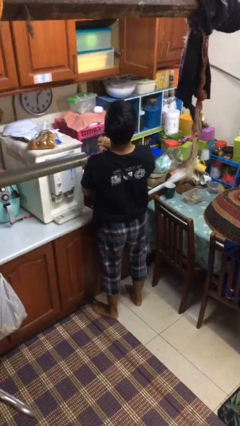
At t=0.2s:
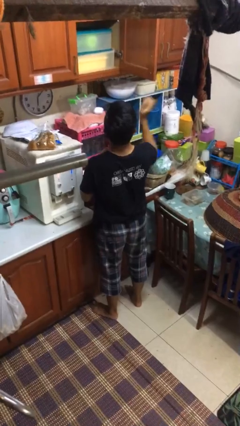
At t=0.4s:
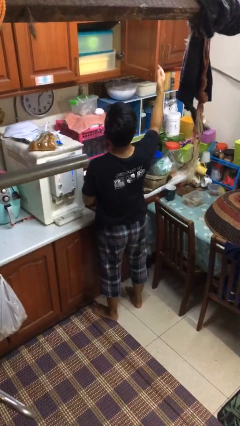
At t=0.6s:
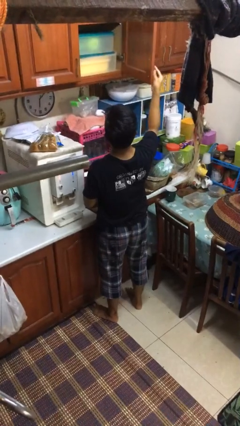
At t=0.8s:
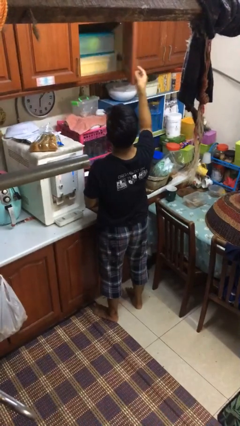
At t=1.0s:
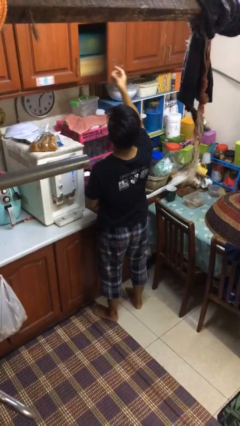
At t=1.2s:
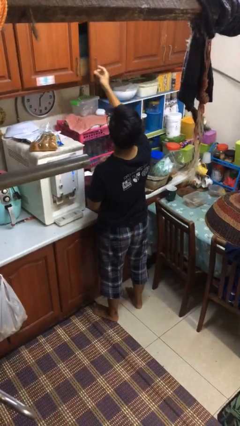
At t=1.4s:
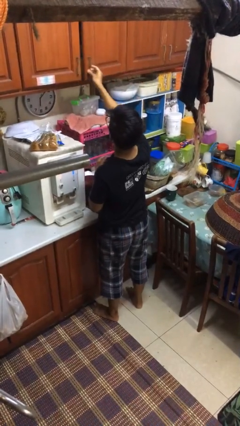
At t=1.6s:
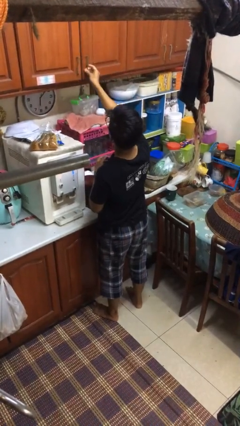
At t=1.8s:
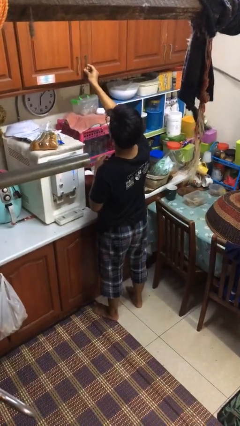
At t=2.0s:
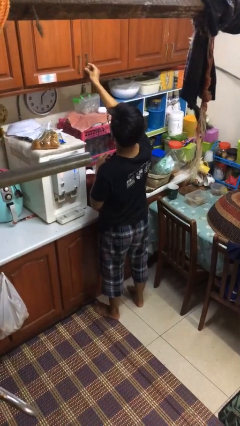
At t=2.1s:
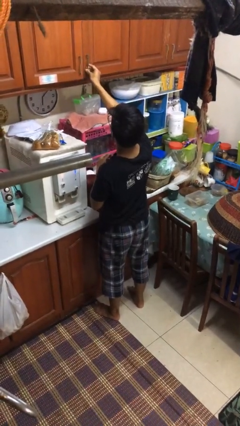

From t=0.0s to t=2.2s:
person closes kitchen drawer

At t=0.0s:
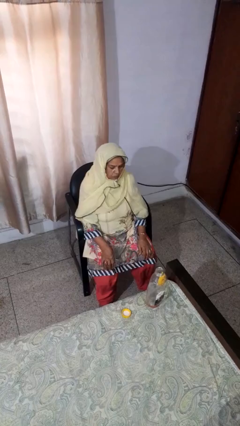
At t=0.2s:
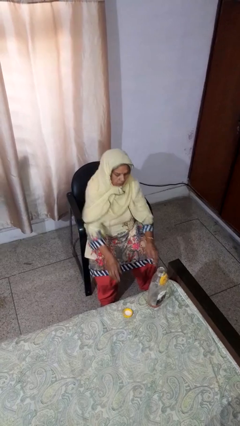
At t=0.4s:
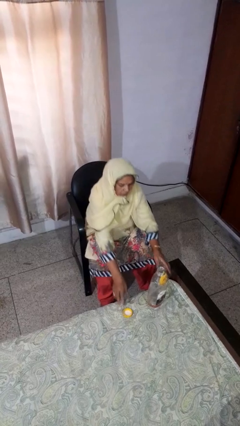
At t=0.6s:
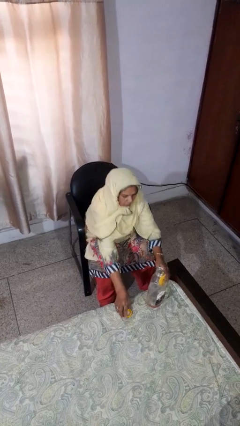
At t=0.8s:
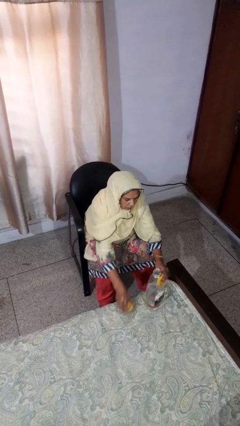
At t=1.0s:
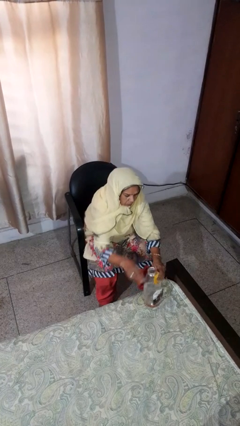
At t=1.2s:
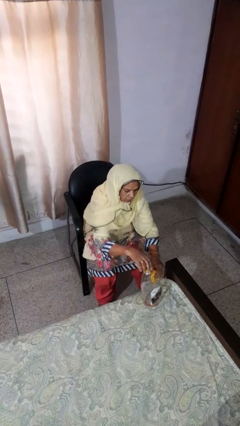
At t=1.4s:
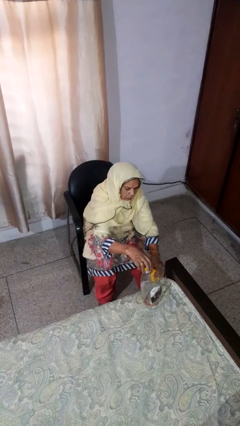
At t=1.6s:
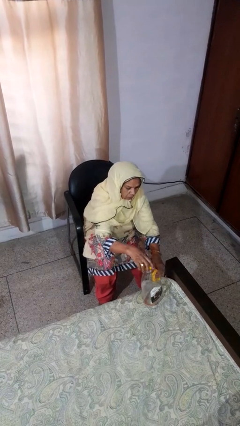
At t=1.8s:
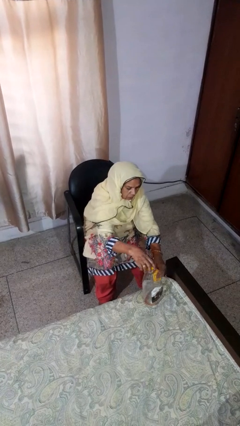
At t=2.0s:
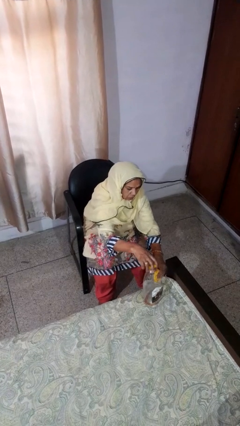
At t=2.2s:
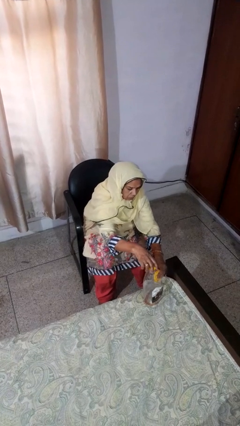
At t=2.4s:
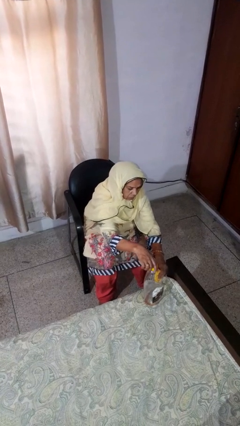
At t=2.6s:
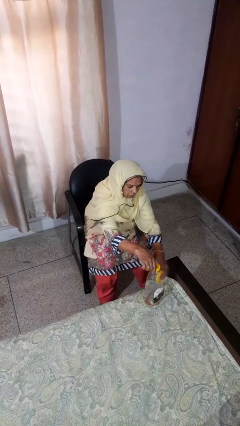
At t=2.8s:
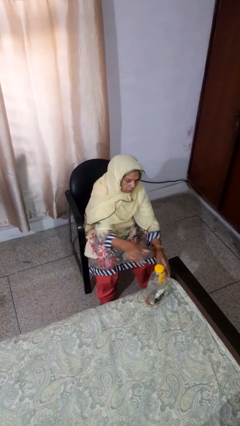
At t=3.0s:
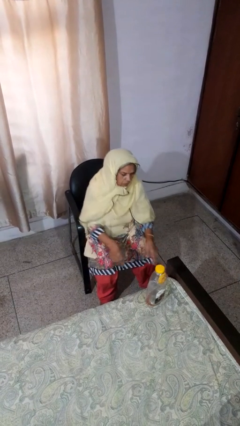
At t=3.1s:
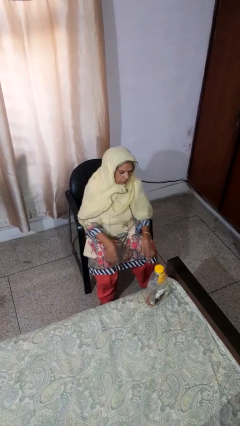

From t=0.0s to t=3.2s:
person screws lid to bottle

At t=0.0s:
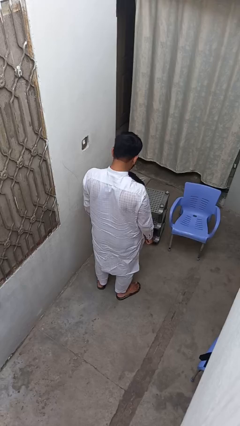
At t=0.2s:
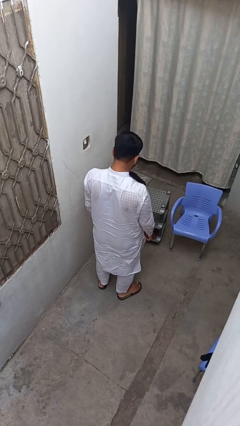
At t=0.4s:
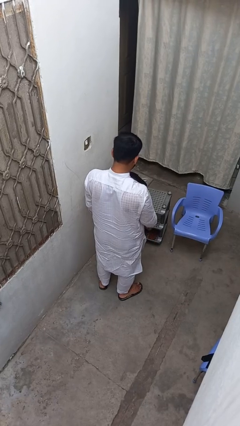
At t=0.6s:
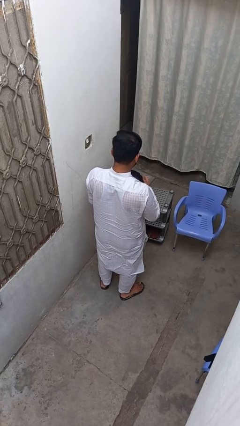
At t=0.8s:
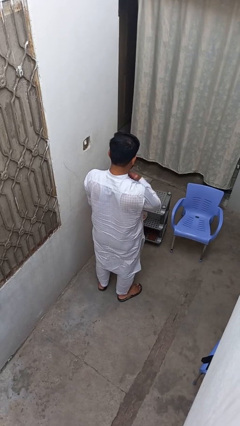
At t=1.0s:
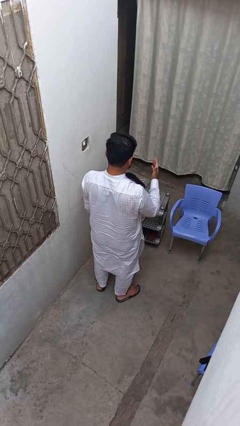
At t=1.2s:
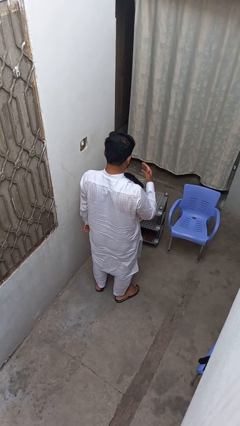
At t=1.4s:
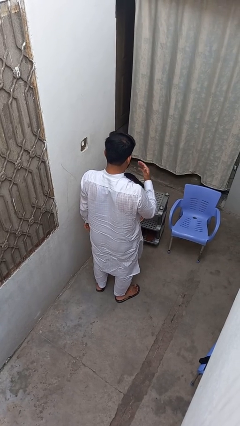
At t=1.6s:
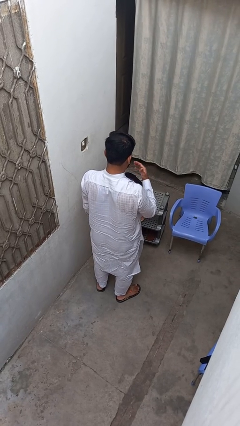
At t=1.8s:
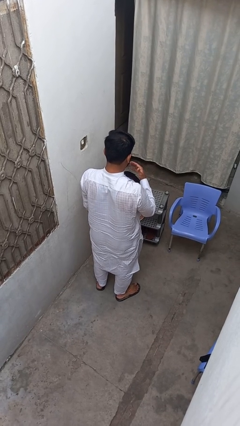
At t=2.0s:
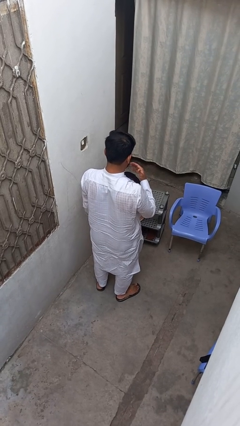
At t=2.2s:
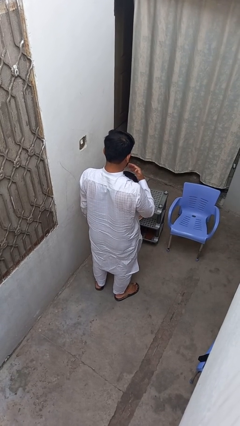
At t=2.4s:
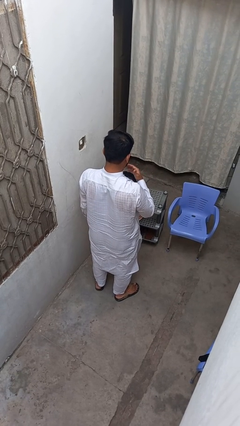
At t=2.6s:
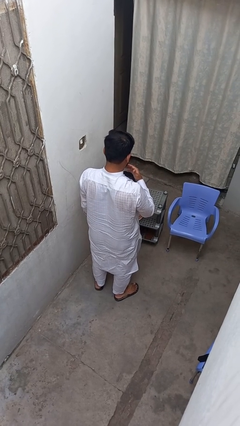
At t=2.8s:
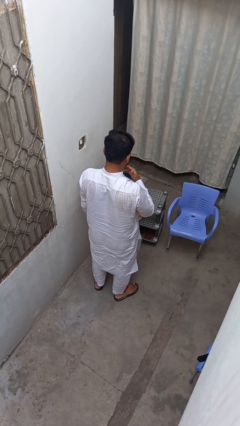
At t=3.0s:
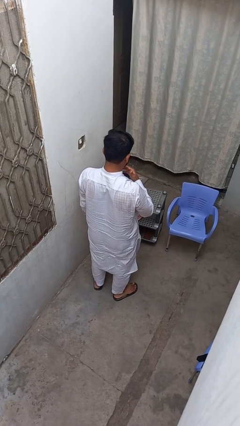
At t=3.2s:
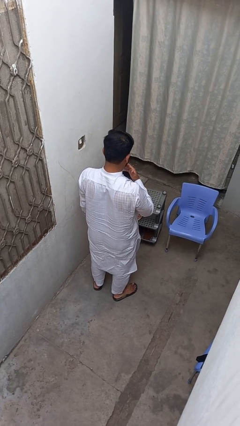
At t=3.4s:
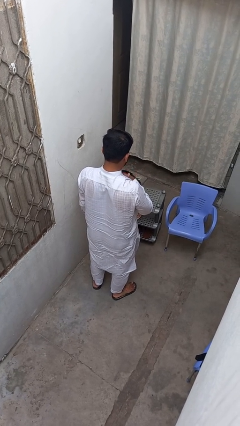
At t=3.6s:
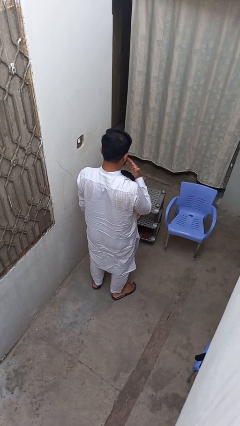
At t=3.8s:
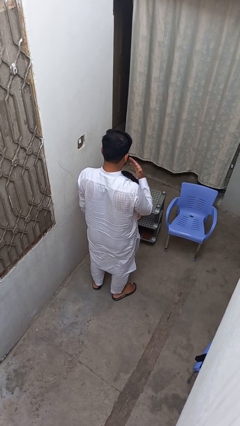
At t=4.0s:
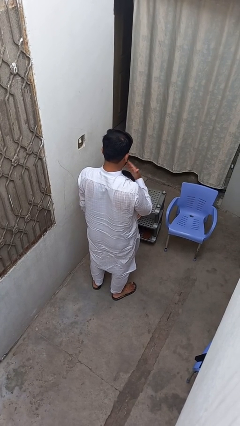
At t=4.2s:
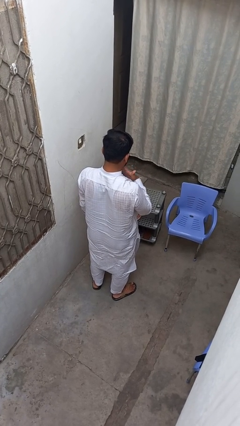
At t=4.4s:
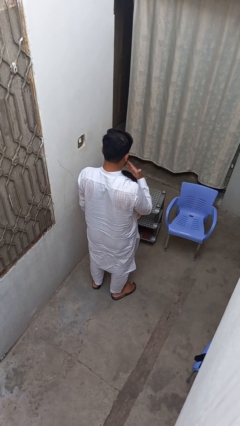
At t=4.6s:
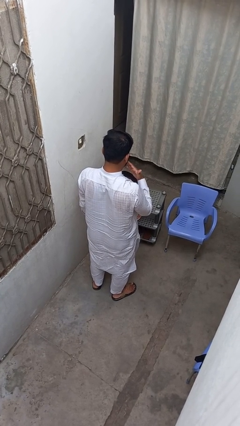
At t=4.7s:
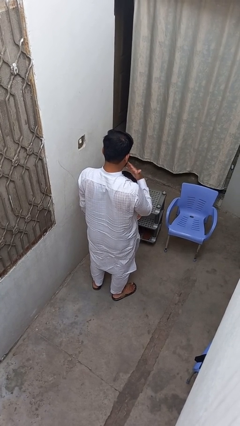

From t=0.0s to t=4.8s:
person drums on chest

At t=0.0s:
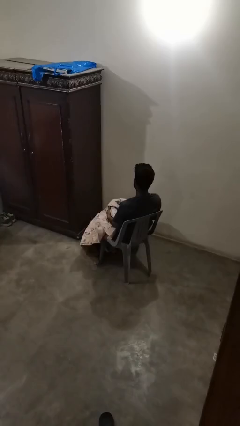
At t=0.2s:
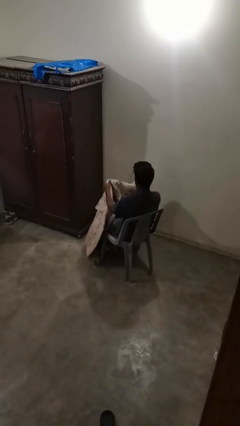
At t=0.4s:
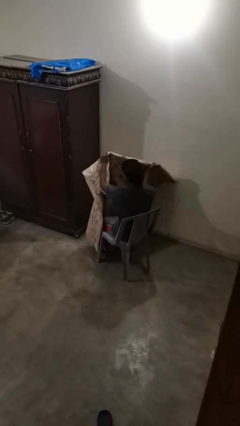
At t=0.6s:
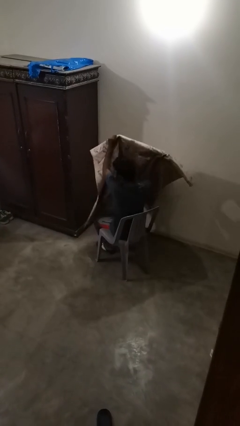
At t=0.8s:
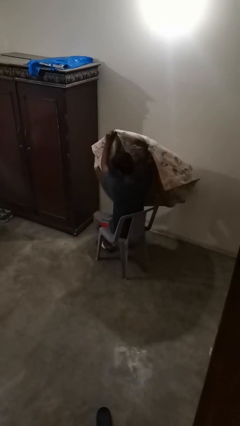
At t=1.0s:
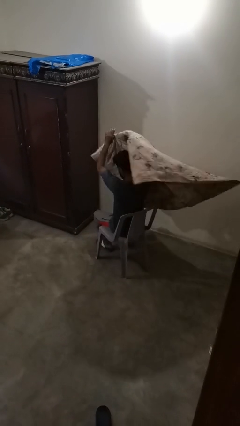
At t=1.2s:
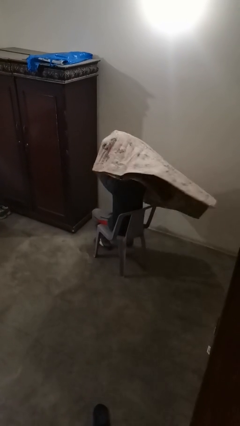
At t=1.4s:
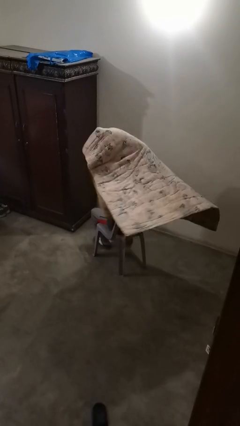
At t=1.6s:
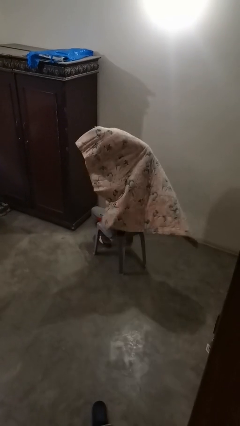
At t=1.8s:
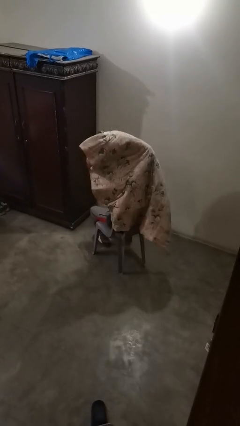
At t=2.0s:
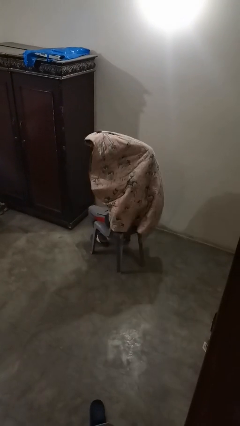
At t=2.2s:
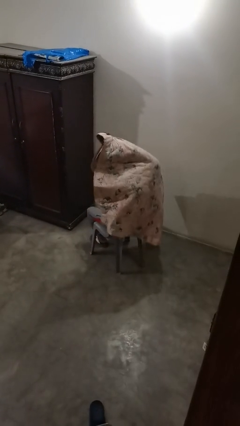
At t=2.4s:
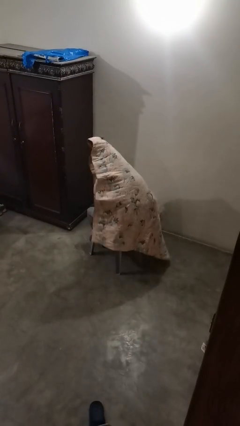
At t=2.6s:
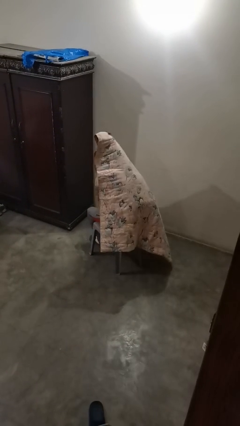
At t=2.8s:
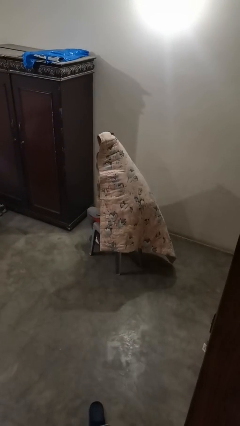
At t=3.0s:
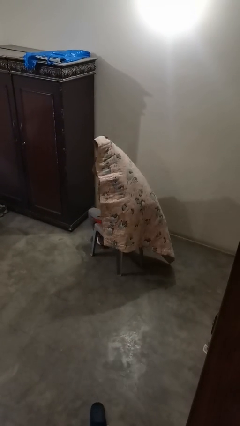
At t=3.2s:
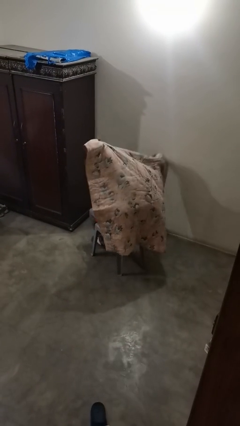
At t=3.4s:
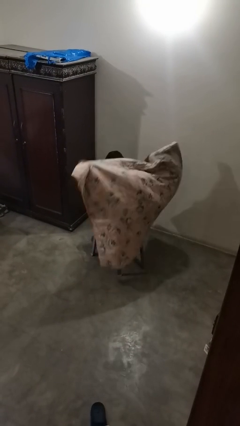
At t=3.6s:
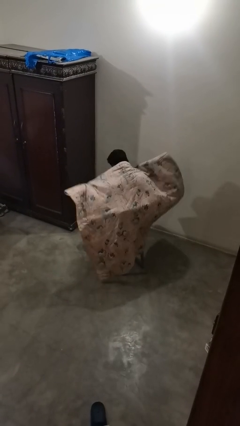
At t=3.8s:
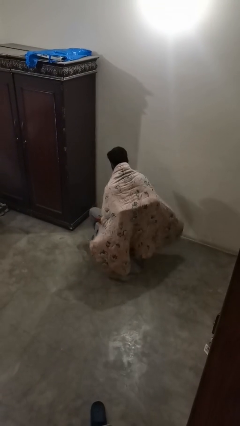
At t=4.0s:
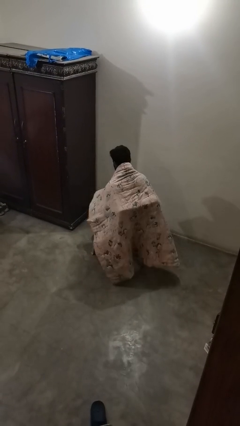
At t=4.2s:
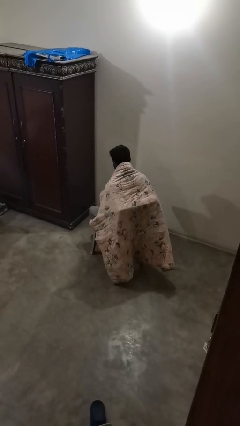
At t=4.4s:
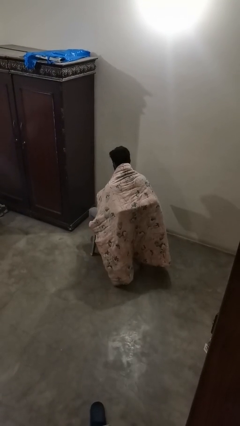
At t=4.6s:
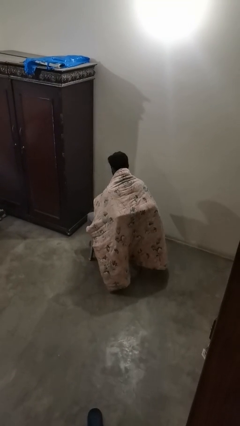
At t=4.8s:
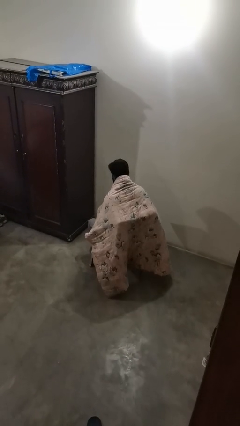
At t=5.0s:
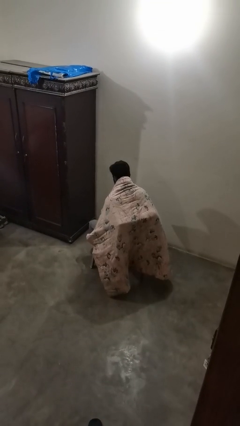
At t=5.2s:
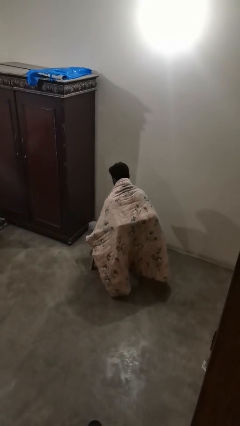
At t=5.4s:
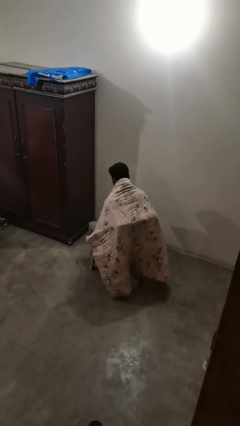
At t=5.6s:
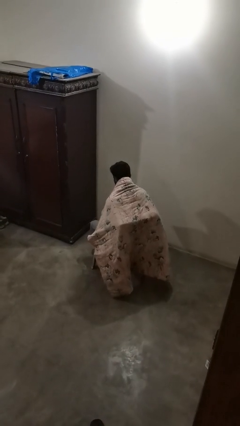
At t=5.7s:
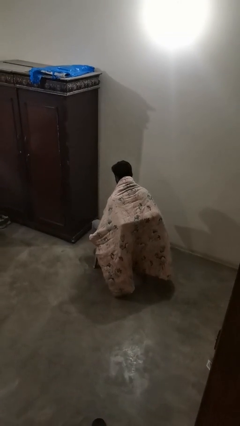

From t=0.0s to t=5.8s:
person covers with blanket

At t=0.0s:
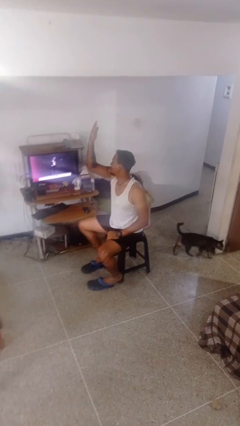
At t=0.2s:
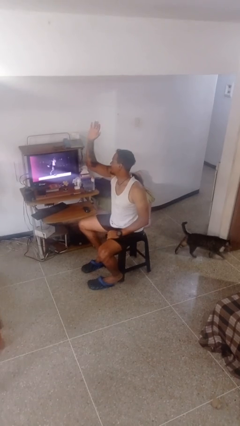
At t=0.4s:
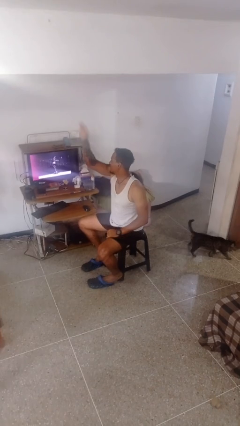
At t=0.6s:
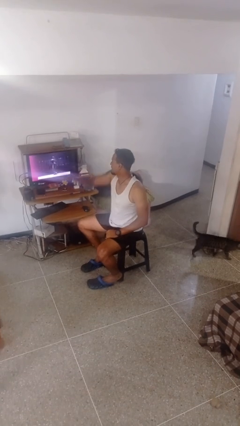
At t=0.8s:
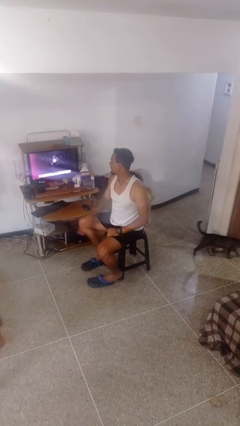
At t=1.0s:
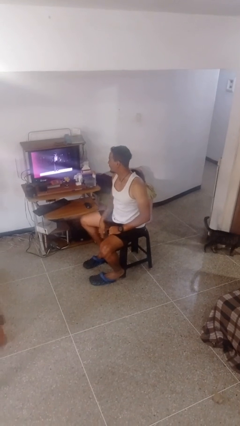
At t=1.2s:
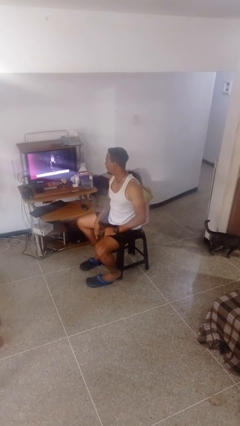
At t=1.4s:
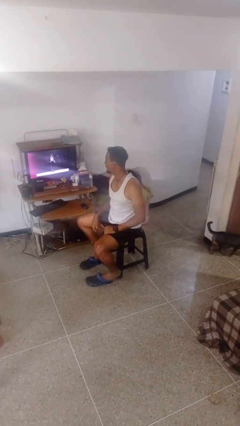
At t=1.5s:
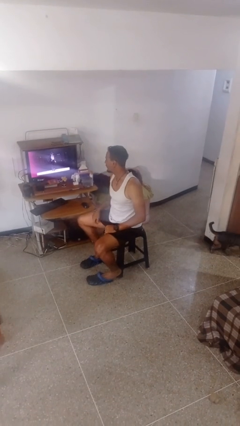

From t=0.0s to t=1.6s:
person gestures swipe down

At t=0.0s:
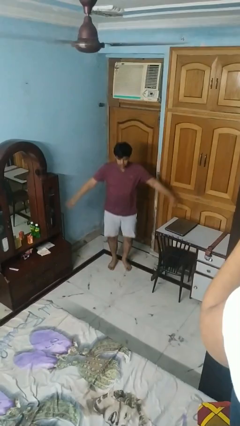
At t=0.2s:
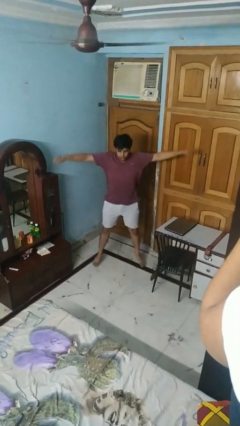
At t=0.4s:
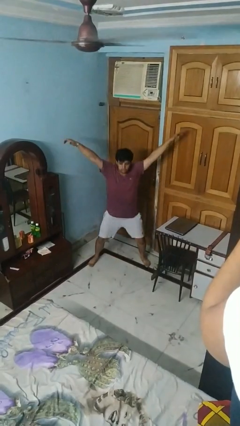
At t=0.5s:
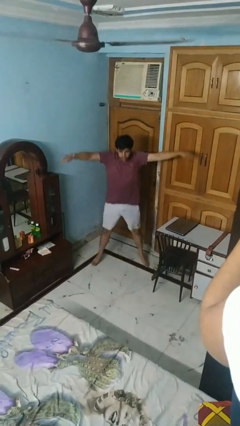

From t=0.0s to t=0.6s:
person exercises with jumping jacks
